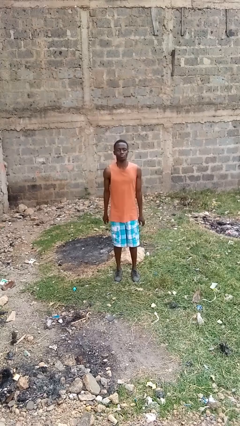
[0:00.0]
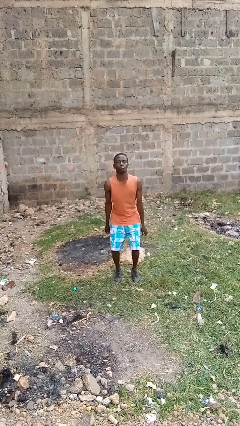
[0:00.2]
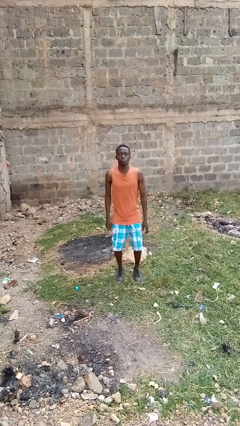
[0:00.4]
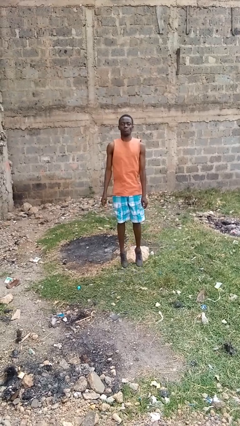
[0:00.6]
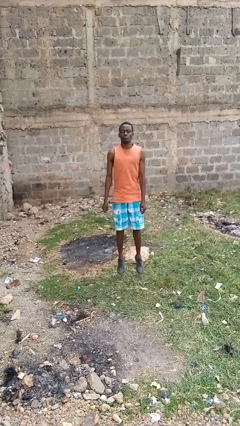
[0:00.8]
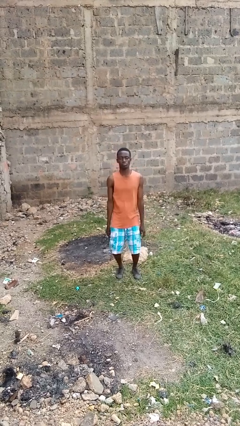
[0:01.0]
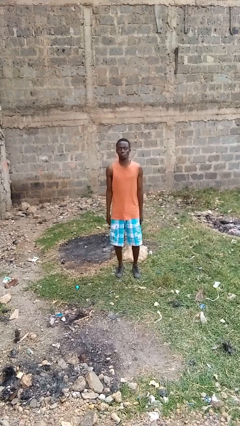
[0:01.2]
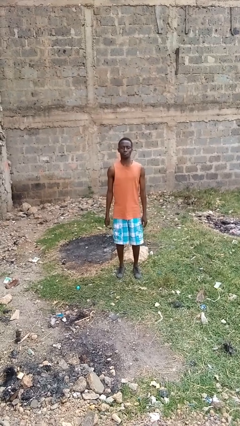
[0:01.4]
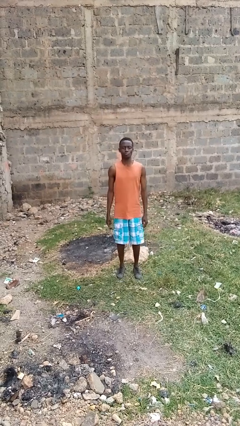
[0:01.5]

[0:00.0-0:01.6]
person jumps

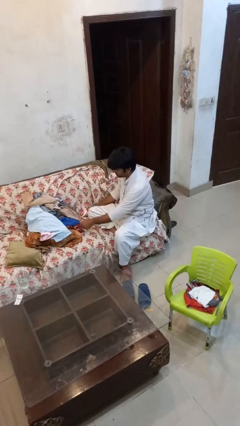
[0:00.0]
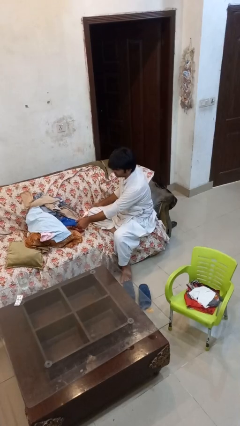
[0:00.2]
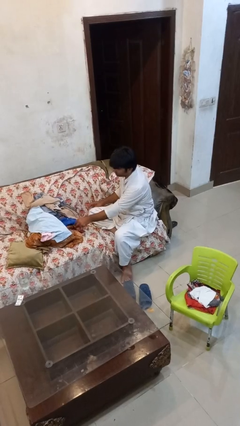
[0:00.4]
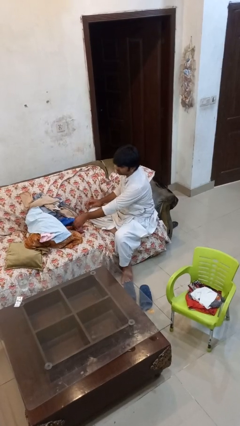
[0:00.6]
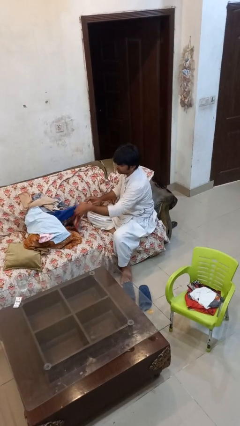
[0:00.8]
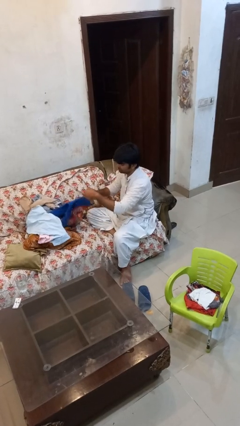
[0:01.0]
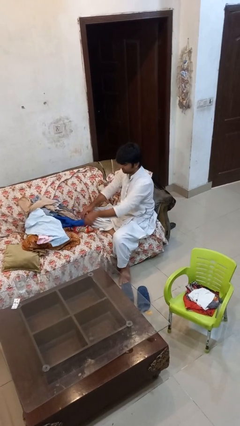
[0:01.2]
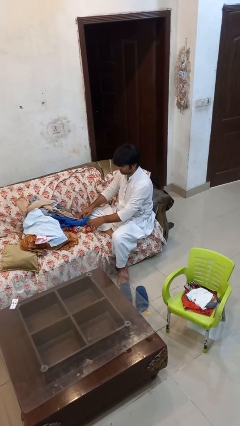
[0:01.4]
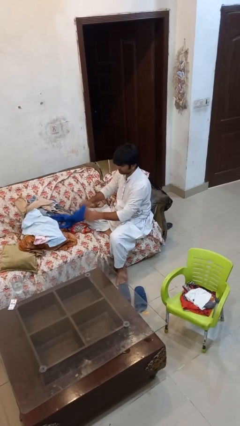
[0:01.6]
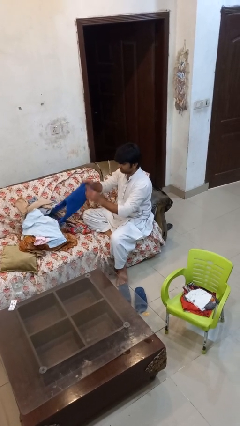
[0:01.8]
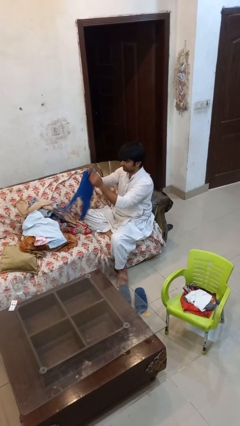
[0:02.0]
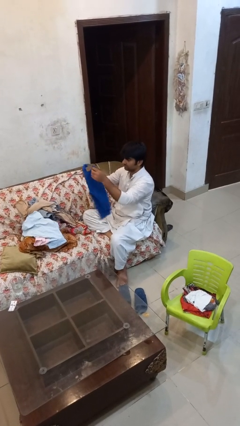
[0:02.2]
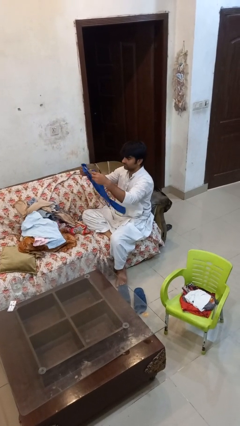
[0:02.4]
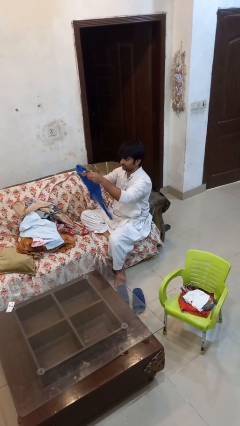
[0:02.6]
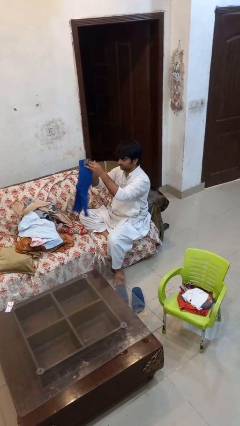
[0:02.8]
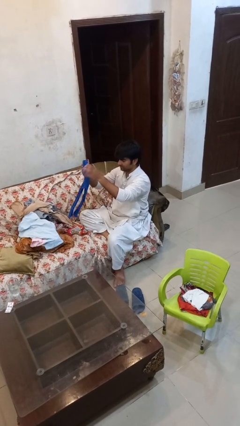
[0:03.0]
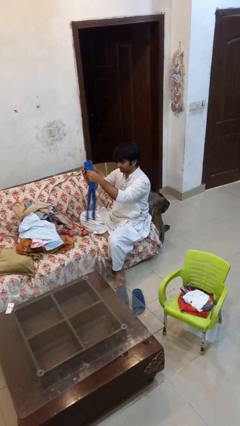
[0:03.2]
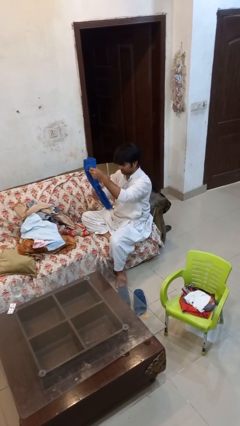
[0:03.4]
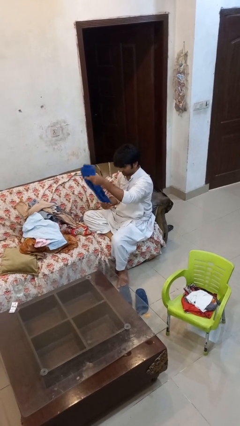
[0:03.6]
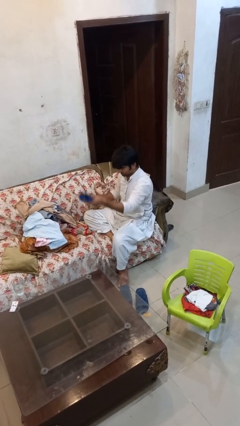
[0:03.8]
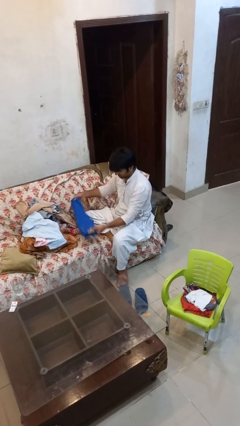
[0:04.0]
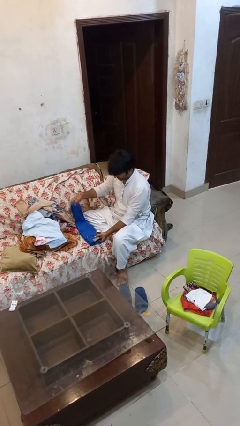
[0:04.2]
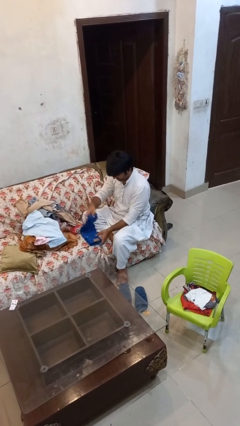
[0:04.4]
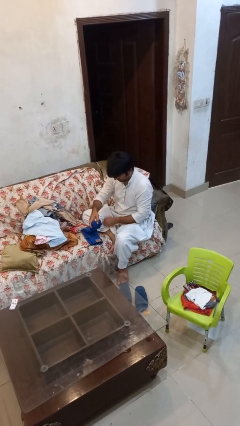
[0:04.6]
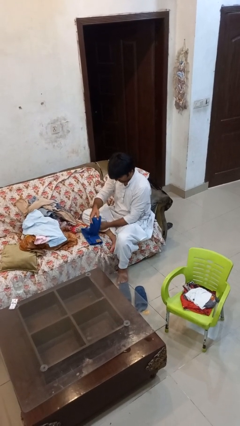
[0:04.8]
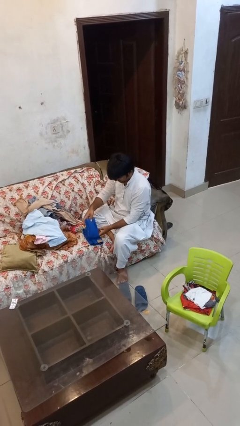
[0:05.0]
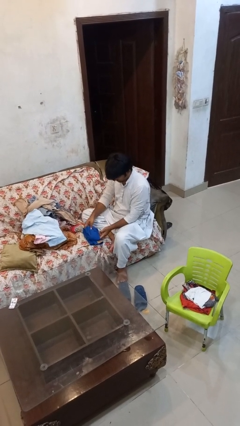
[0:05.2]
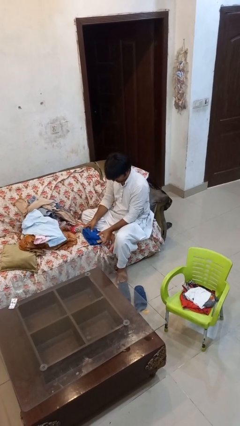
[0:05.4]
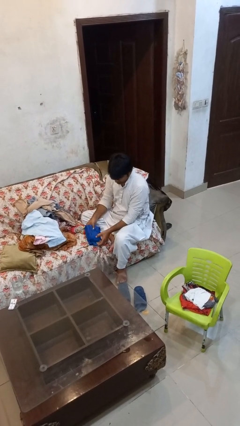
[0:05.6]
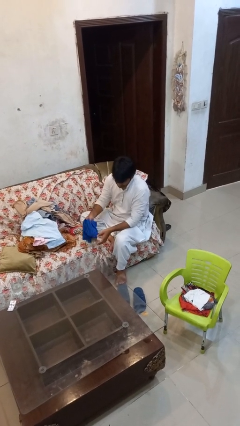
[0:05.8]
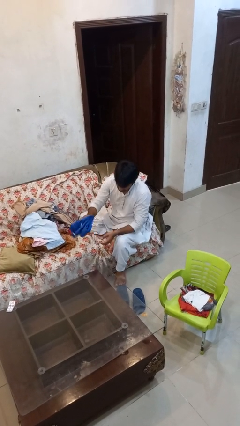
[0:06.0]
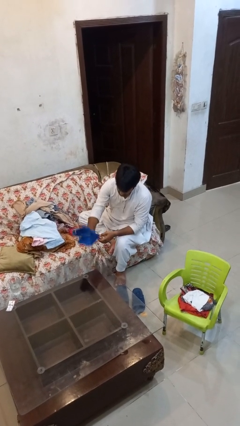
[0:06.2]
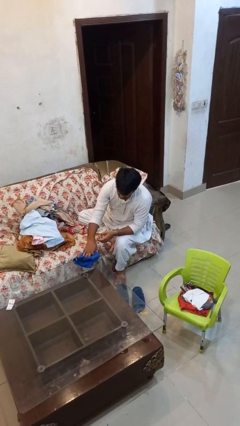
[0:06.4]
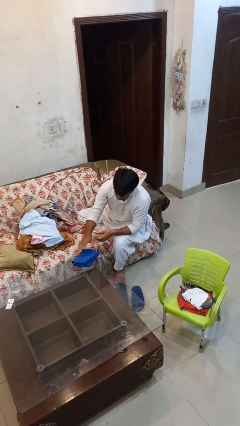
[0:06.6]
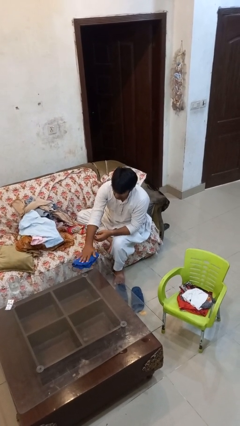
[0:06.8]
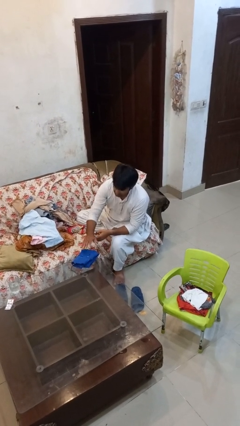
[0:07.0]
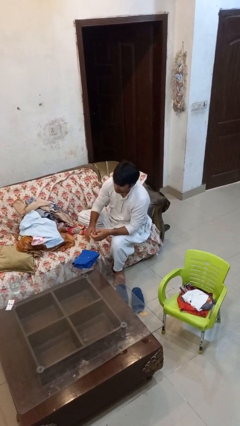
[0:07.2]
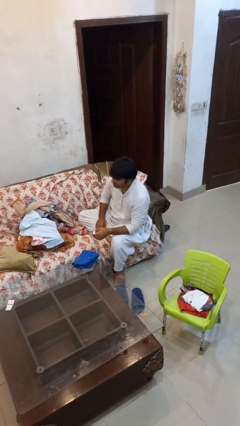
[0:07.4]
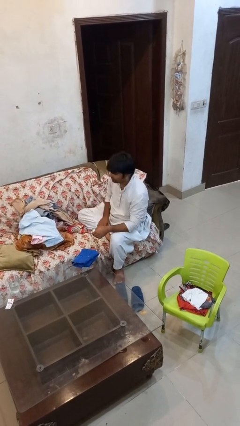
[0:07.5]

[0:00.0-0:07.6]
person folds pants

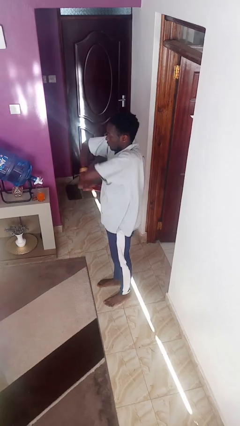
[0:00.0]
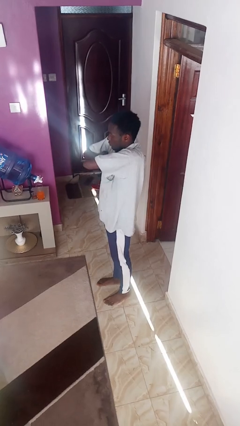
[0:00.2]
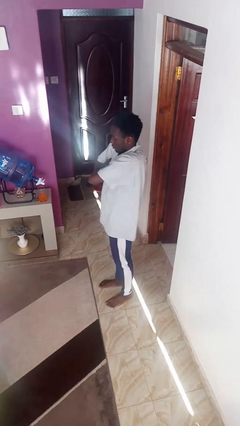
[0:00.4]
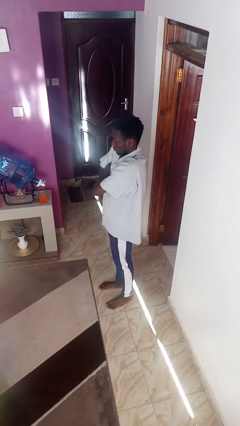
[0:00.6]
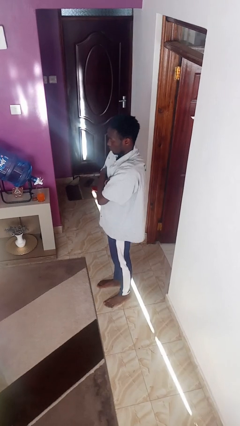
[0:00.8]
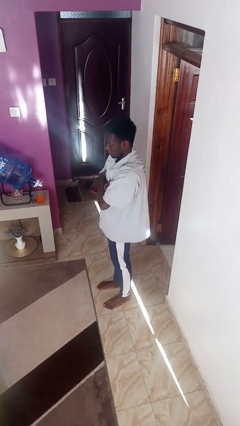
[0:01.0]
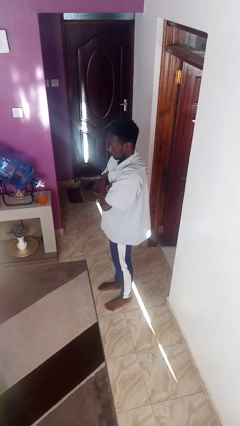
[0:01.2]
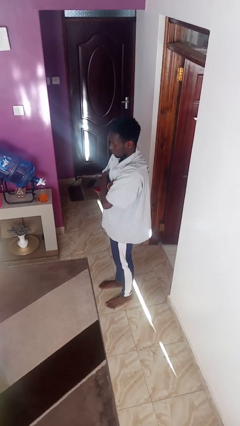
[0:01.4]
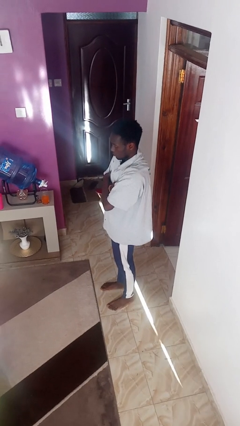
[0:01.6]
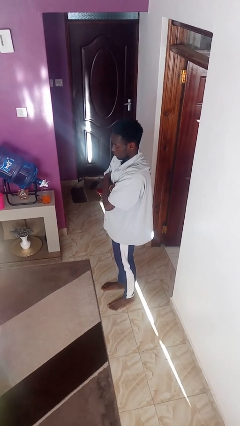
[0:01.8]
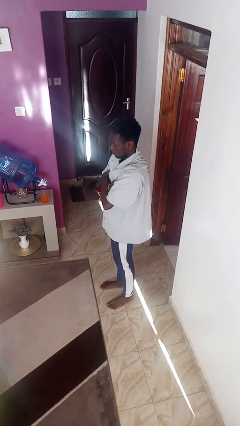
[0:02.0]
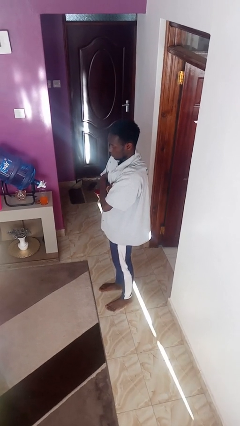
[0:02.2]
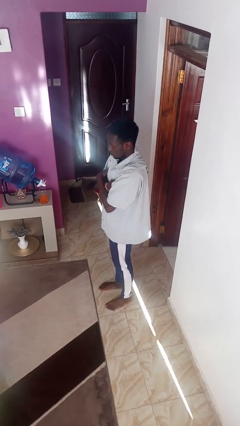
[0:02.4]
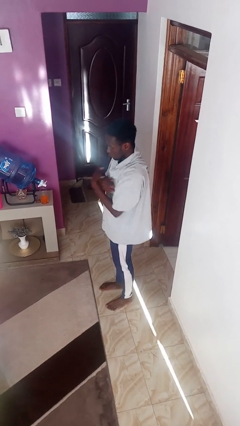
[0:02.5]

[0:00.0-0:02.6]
person crosses arms

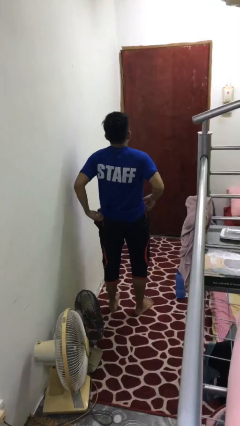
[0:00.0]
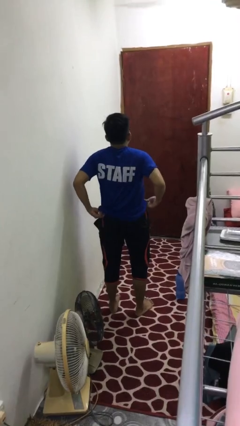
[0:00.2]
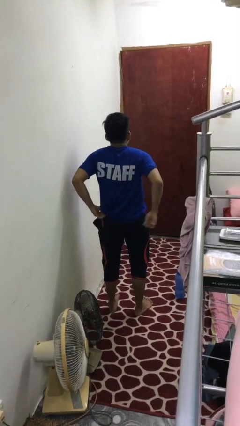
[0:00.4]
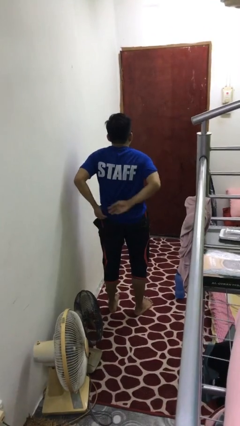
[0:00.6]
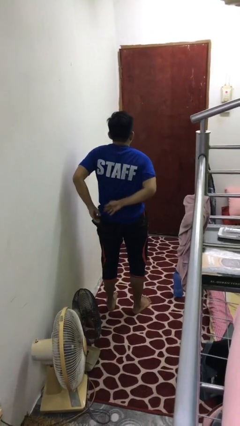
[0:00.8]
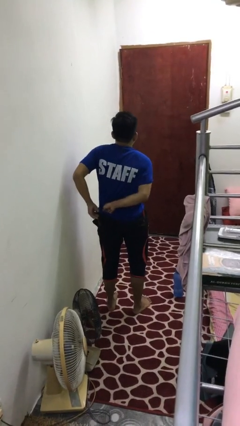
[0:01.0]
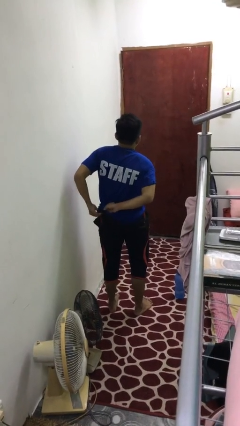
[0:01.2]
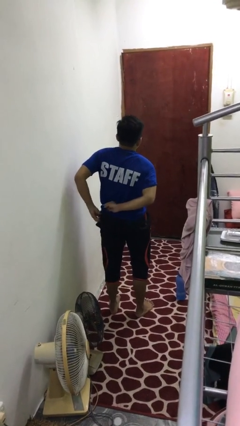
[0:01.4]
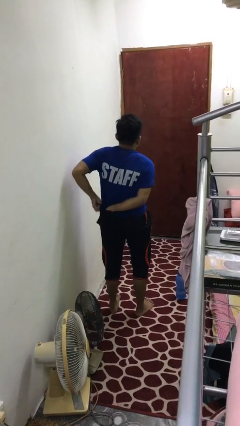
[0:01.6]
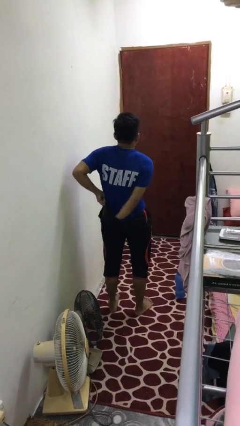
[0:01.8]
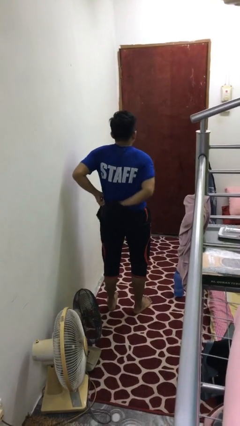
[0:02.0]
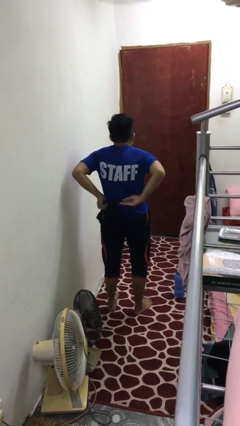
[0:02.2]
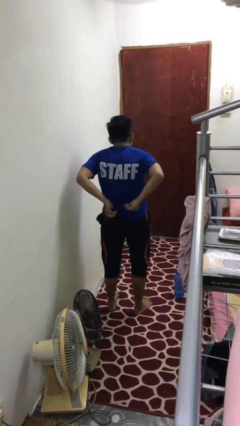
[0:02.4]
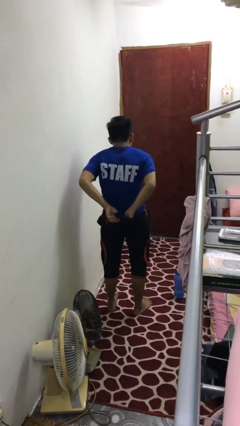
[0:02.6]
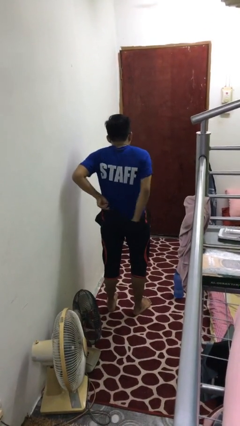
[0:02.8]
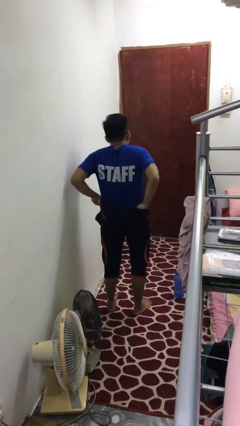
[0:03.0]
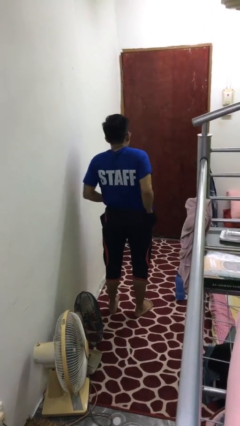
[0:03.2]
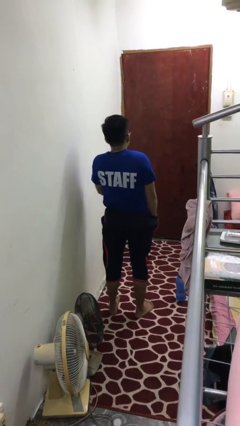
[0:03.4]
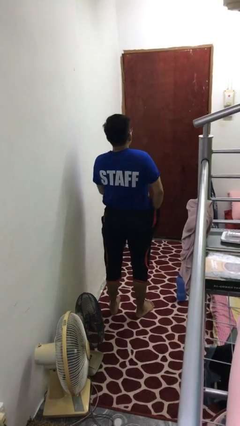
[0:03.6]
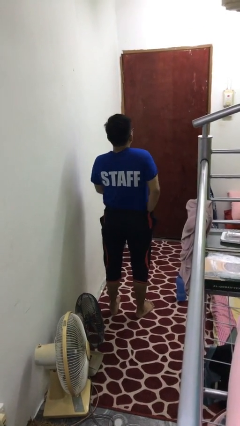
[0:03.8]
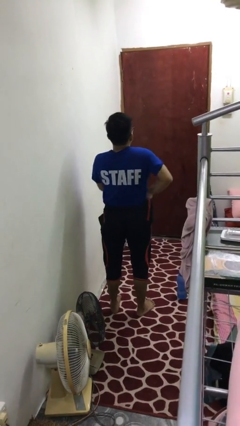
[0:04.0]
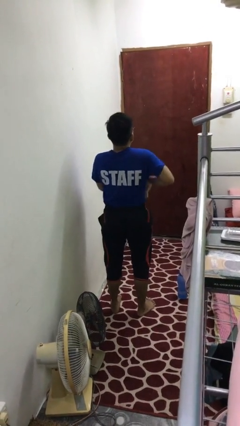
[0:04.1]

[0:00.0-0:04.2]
person tucks in shirt

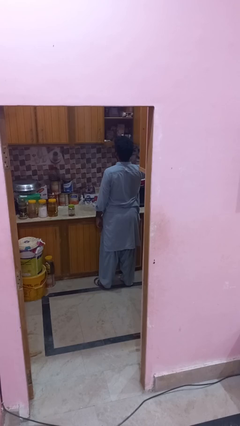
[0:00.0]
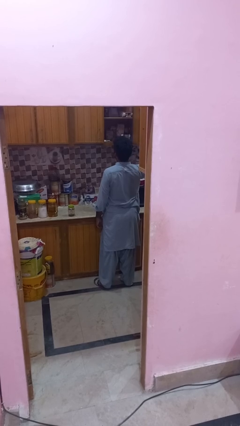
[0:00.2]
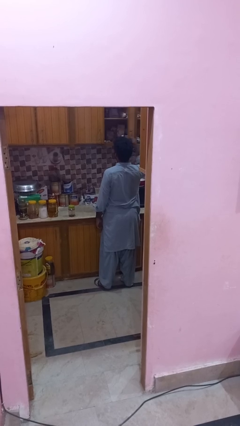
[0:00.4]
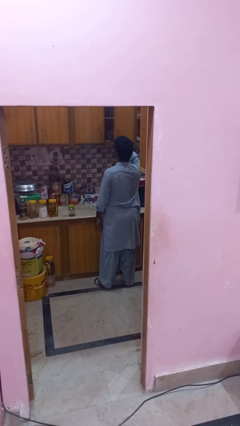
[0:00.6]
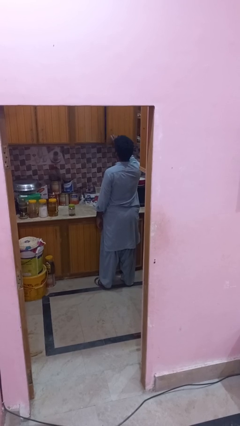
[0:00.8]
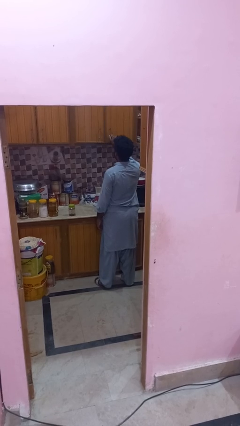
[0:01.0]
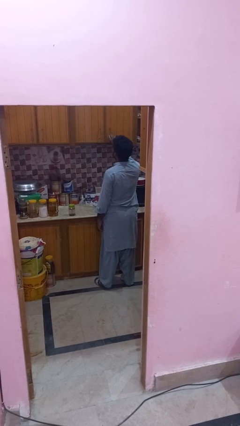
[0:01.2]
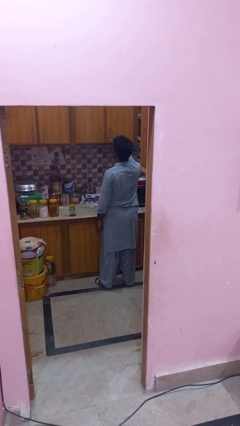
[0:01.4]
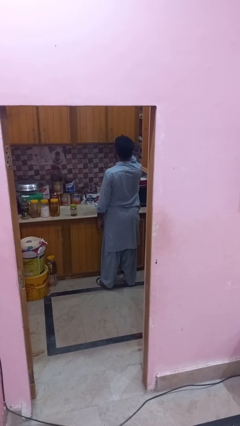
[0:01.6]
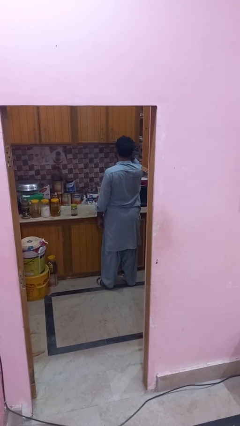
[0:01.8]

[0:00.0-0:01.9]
person closes cabinet
